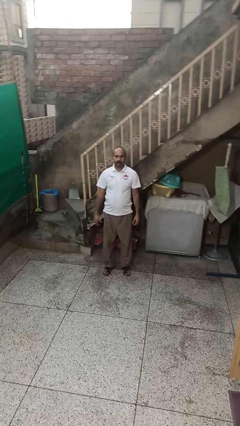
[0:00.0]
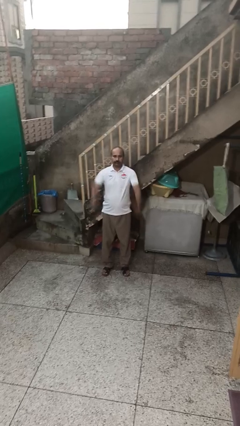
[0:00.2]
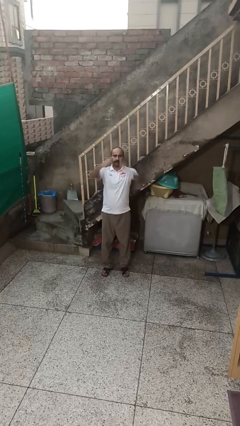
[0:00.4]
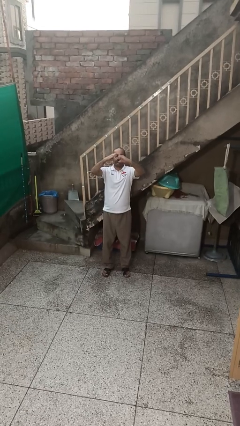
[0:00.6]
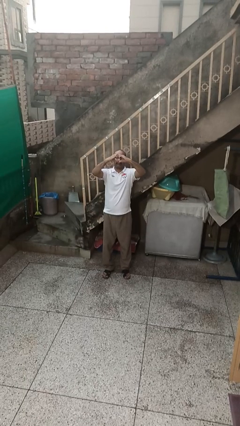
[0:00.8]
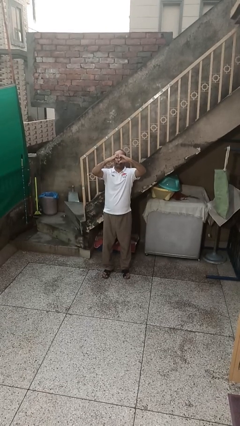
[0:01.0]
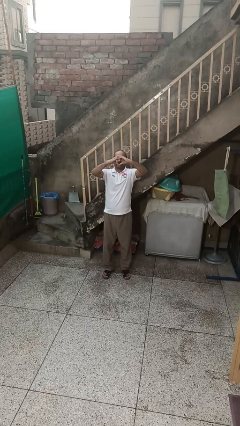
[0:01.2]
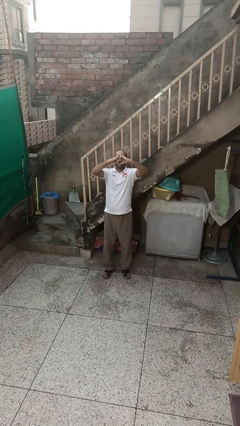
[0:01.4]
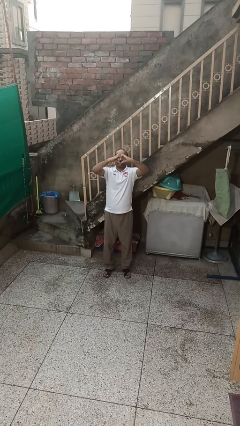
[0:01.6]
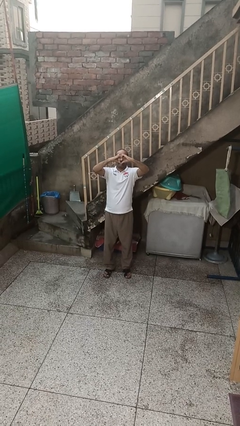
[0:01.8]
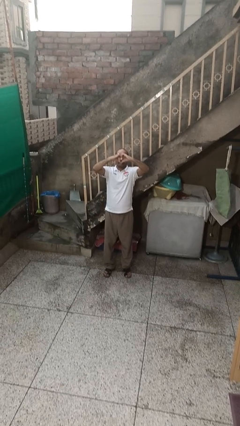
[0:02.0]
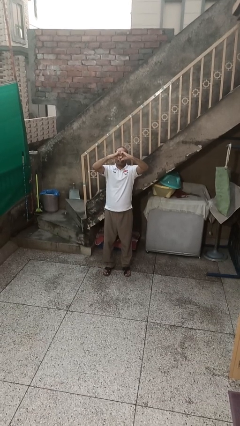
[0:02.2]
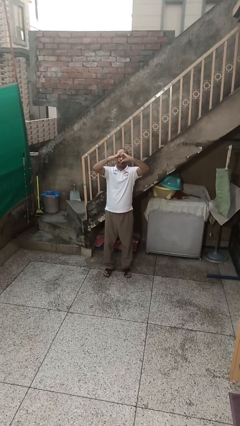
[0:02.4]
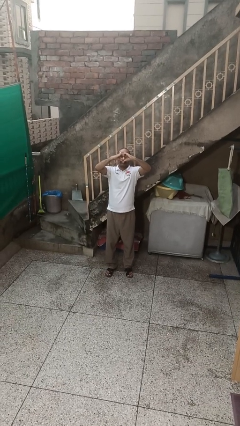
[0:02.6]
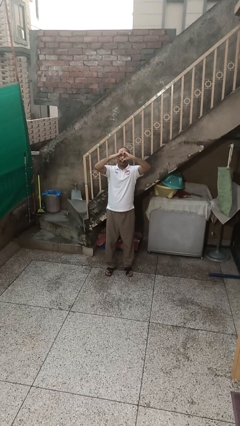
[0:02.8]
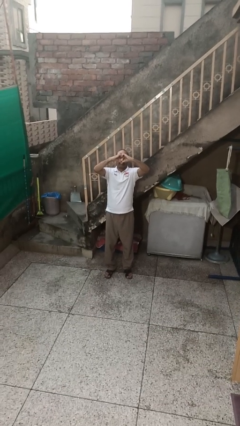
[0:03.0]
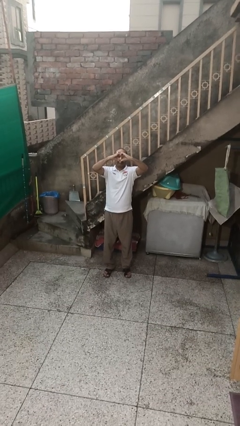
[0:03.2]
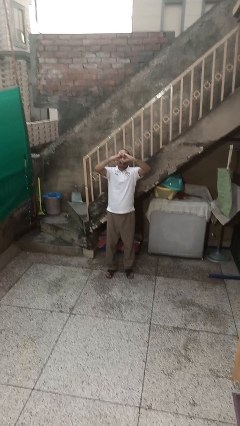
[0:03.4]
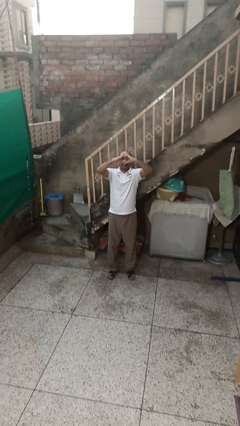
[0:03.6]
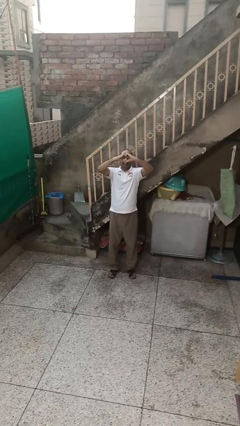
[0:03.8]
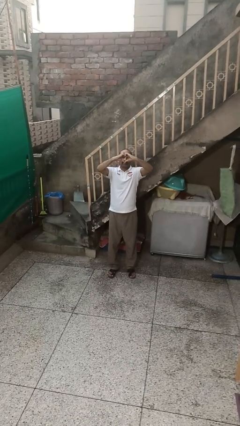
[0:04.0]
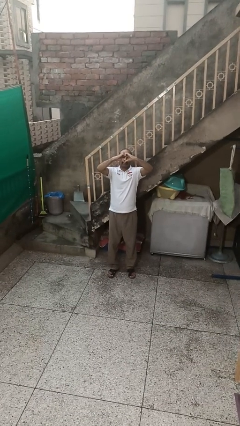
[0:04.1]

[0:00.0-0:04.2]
person gestures heart

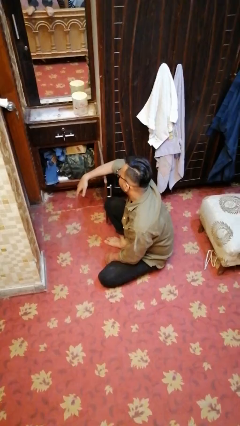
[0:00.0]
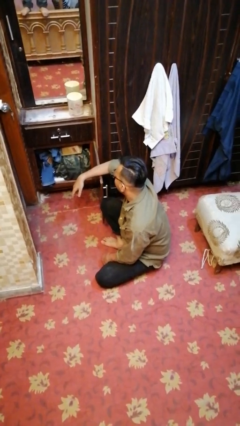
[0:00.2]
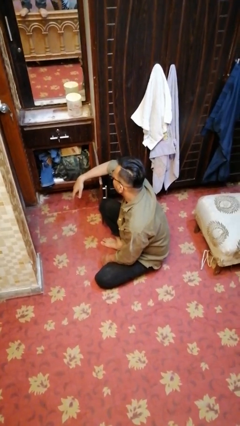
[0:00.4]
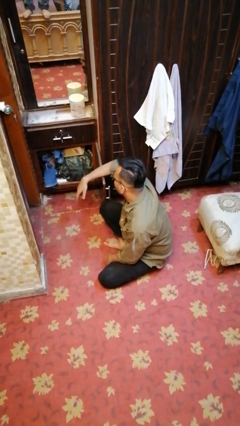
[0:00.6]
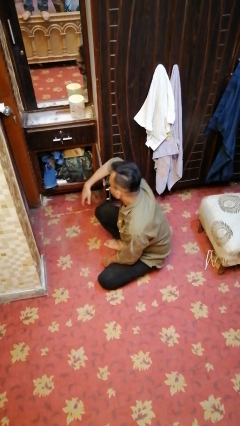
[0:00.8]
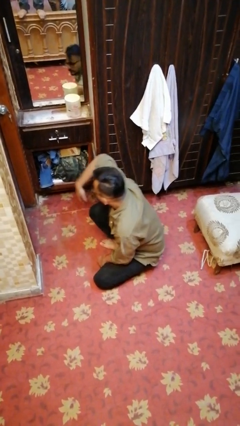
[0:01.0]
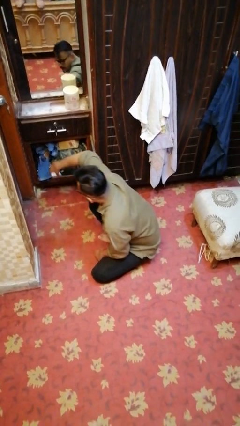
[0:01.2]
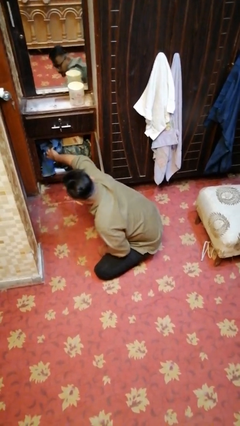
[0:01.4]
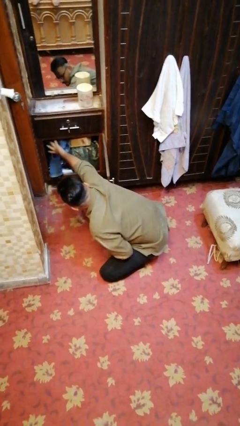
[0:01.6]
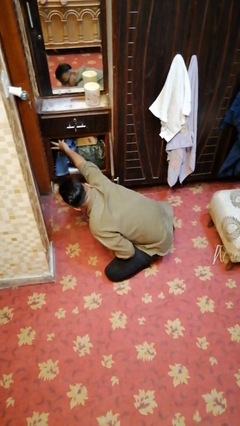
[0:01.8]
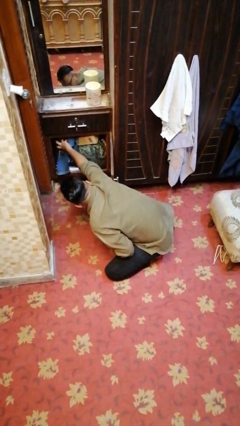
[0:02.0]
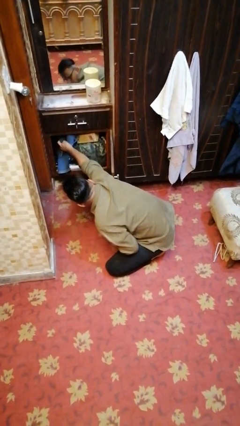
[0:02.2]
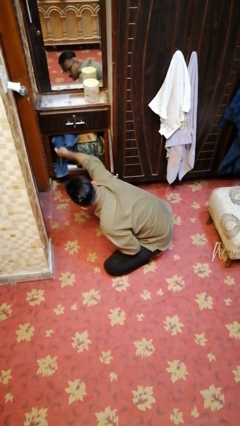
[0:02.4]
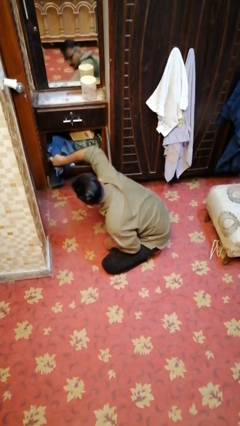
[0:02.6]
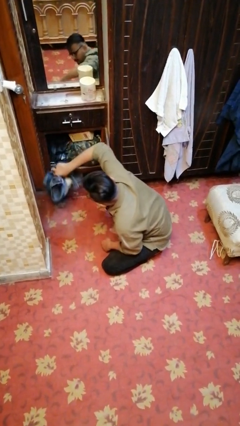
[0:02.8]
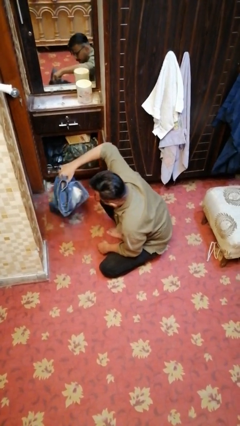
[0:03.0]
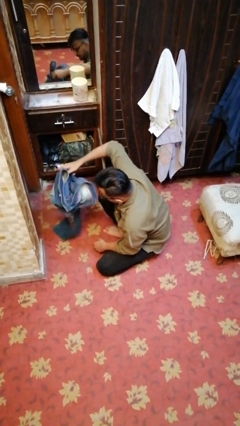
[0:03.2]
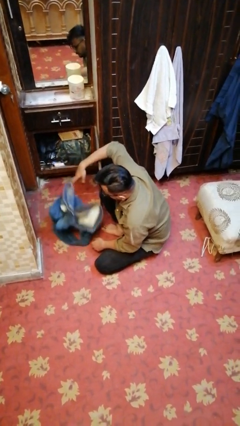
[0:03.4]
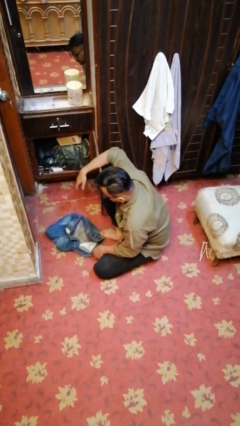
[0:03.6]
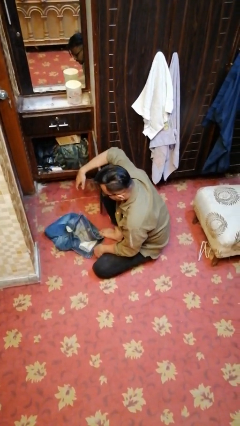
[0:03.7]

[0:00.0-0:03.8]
person takes clothes from dresser

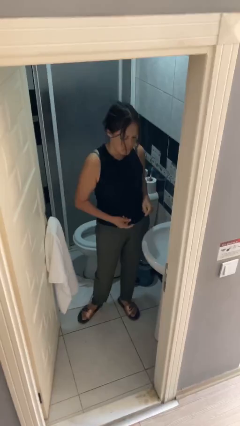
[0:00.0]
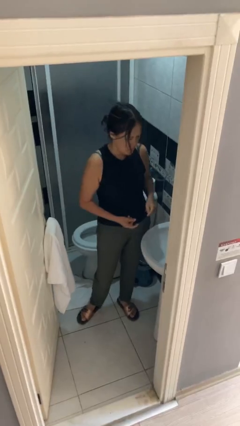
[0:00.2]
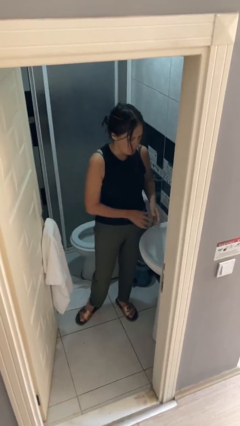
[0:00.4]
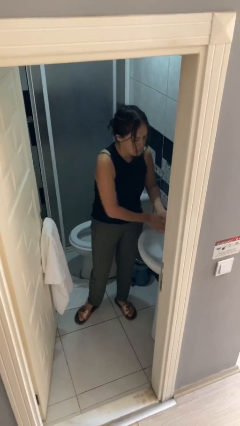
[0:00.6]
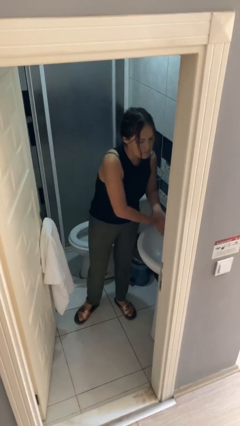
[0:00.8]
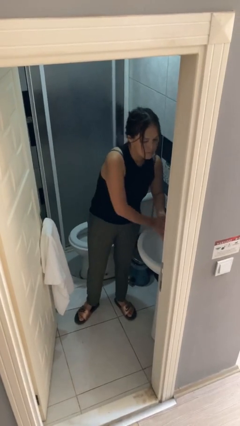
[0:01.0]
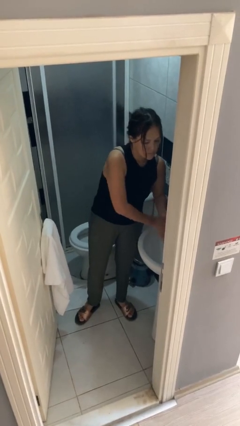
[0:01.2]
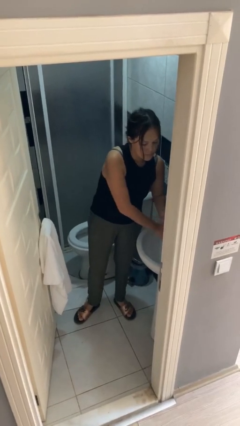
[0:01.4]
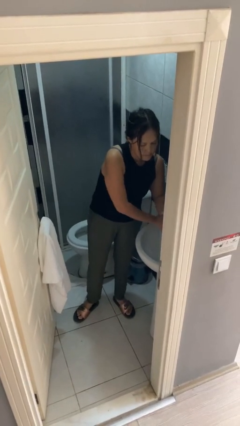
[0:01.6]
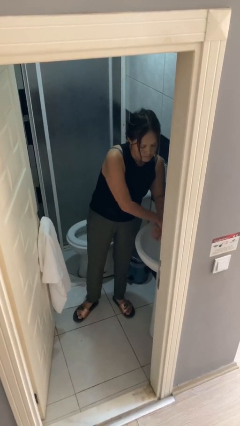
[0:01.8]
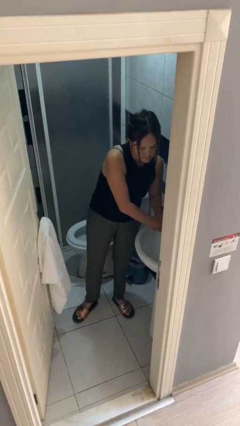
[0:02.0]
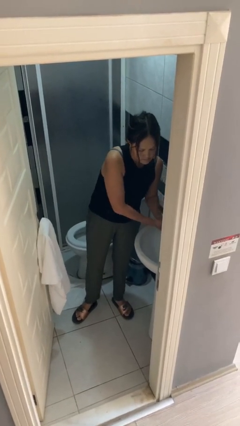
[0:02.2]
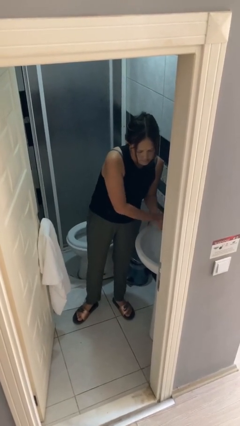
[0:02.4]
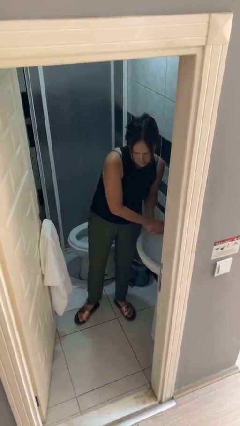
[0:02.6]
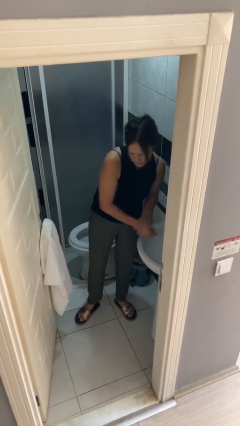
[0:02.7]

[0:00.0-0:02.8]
person washes hands

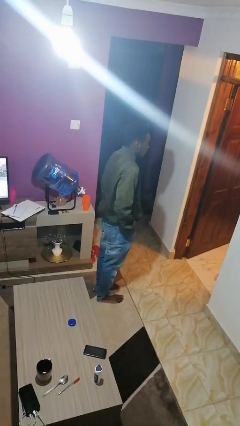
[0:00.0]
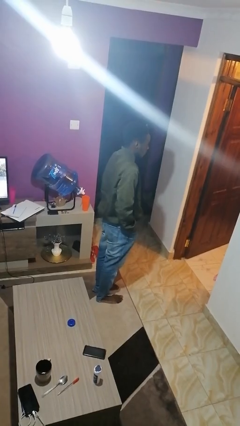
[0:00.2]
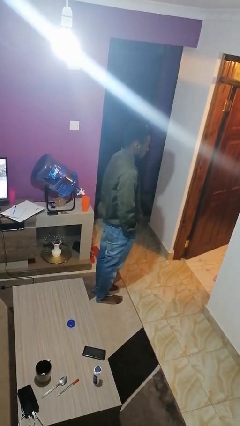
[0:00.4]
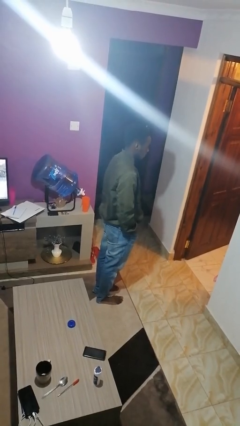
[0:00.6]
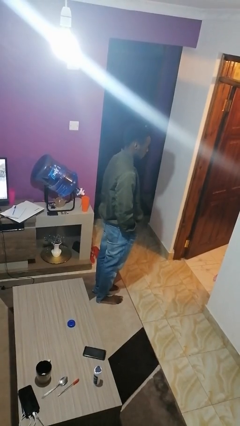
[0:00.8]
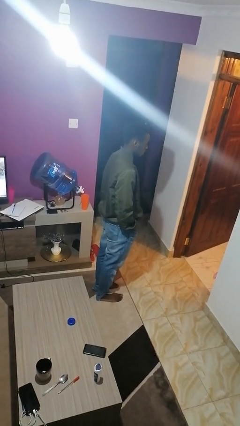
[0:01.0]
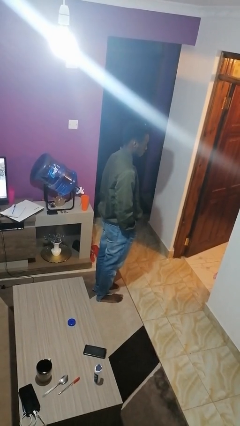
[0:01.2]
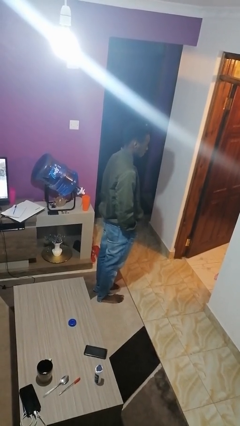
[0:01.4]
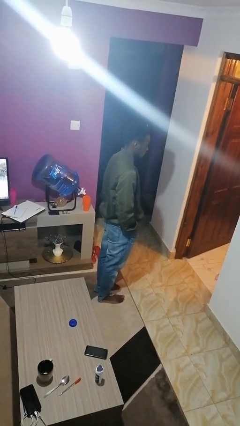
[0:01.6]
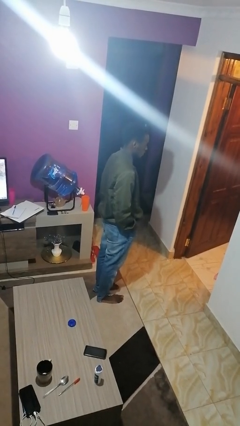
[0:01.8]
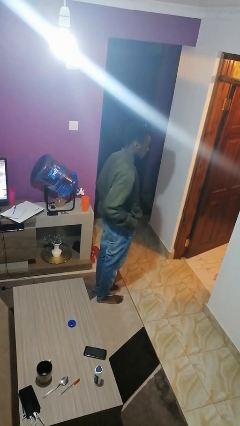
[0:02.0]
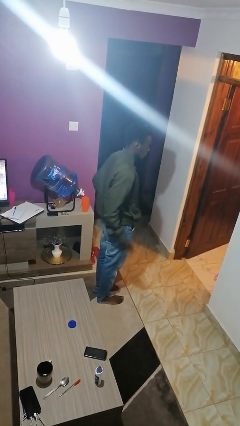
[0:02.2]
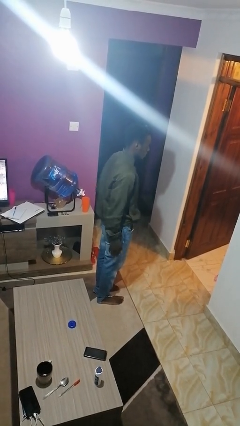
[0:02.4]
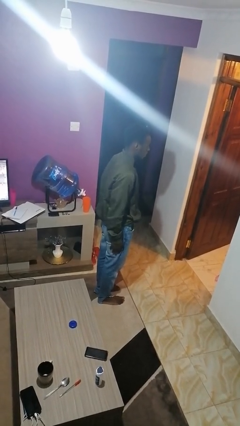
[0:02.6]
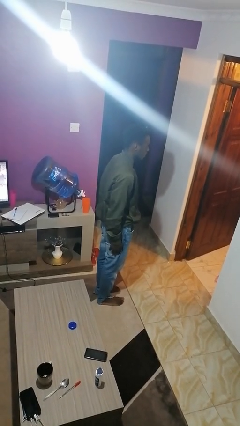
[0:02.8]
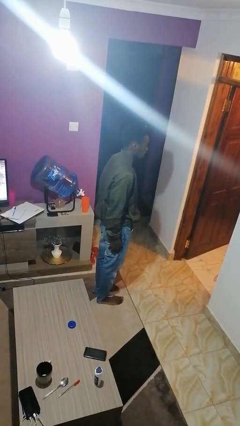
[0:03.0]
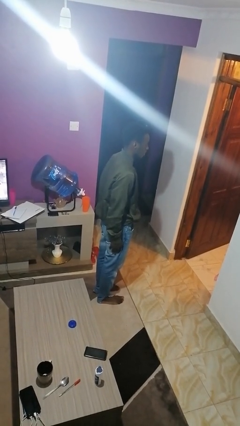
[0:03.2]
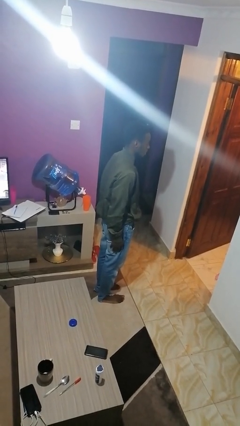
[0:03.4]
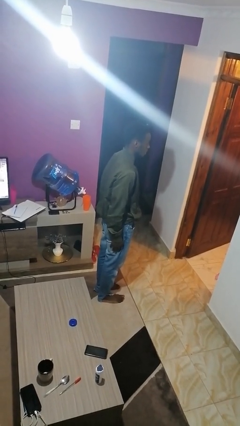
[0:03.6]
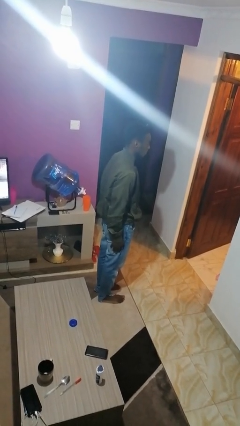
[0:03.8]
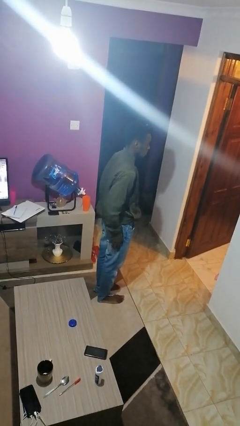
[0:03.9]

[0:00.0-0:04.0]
person puts hands in back pockets

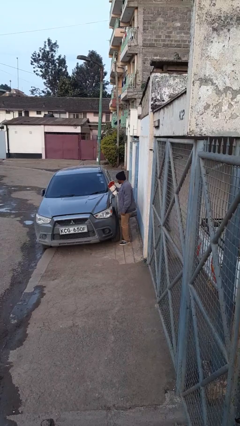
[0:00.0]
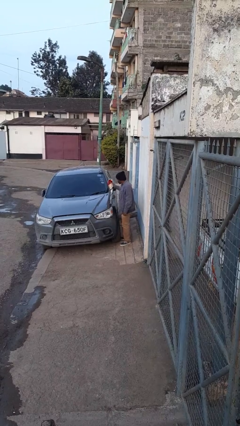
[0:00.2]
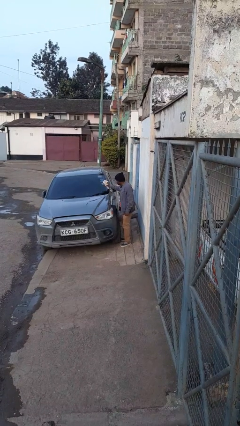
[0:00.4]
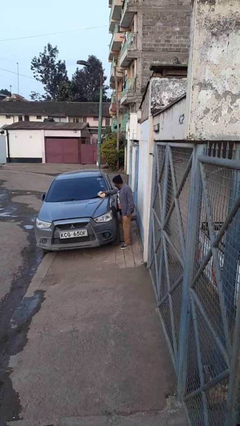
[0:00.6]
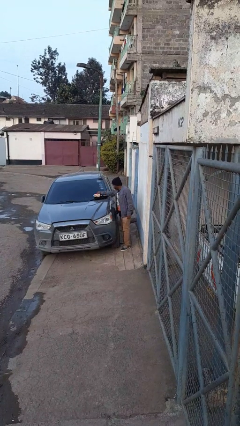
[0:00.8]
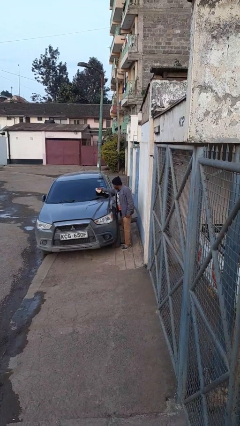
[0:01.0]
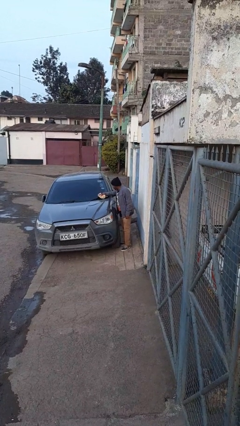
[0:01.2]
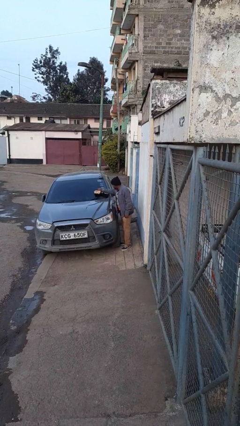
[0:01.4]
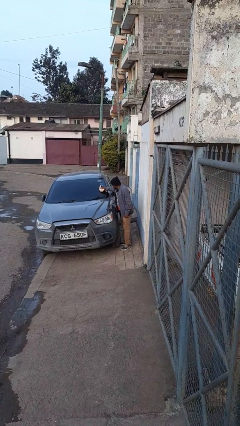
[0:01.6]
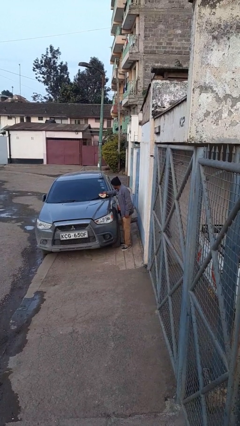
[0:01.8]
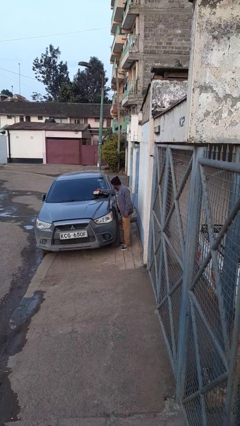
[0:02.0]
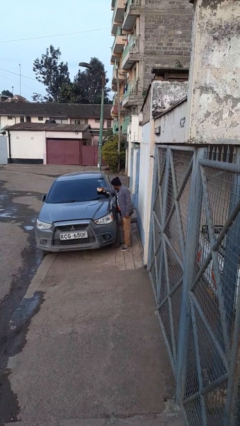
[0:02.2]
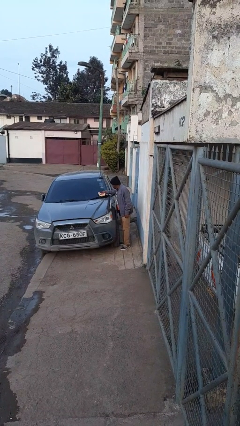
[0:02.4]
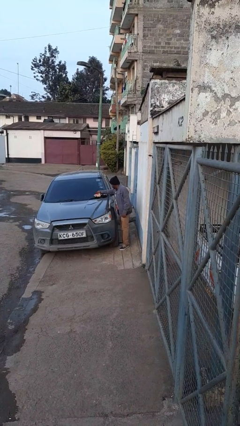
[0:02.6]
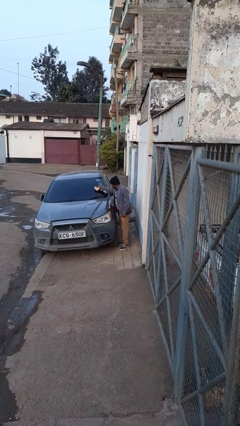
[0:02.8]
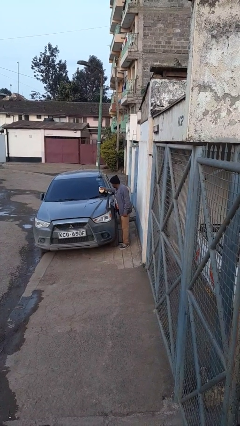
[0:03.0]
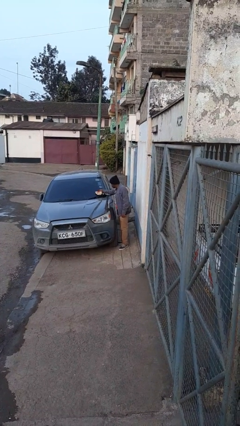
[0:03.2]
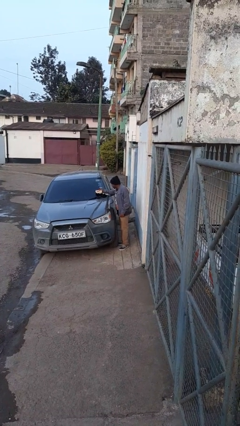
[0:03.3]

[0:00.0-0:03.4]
person polishes car with rag
